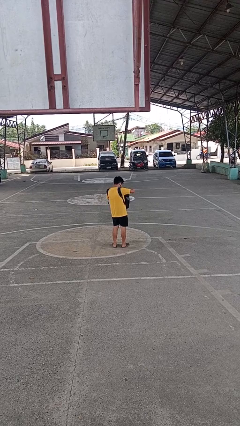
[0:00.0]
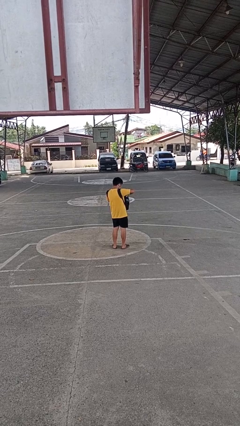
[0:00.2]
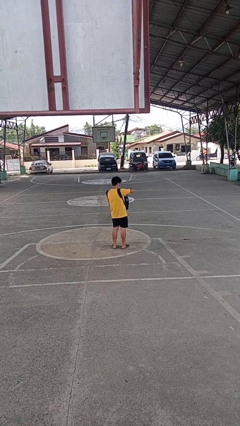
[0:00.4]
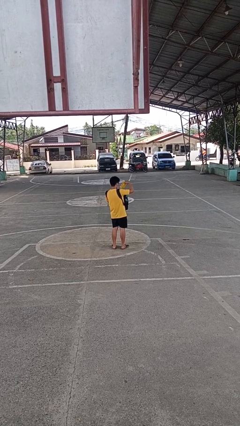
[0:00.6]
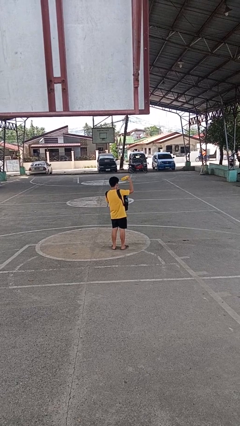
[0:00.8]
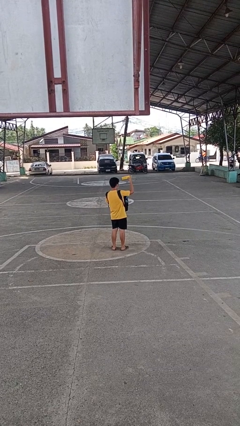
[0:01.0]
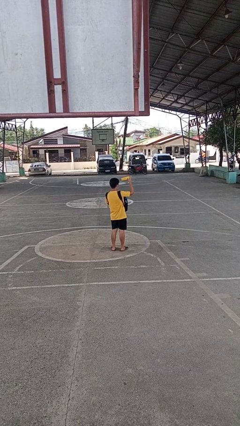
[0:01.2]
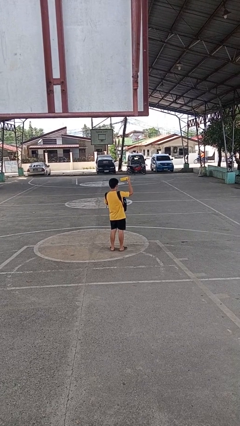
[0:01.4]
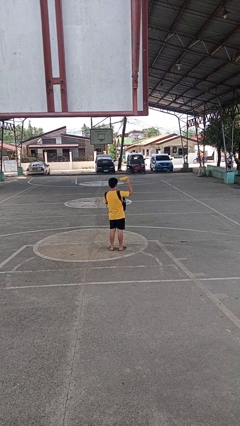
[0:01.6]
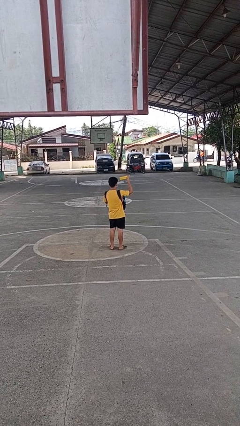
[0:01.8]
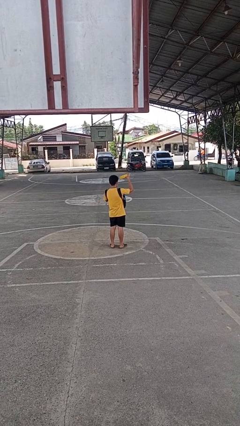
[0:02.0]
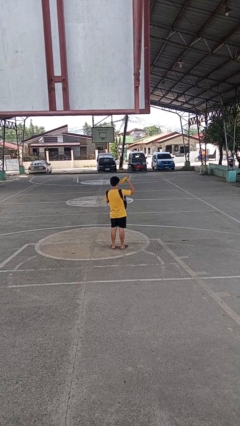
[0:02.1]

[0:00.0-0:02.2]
person takes object from backpack

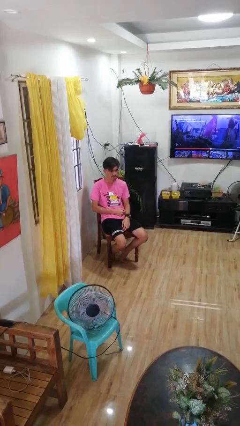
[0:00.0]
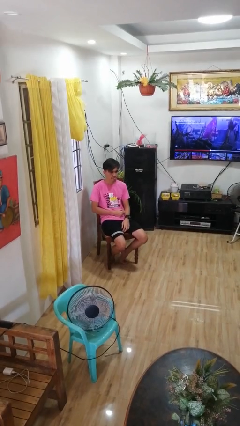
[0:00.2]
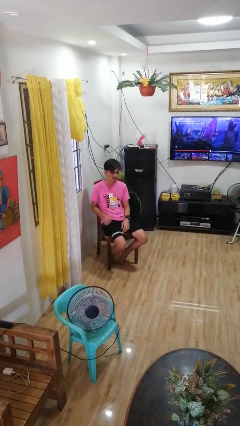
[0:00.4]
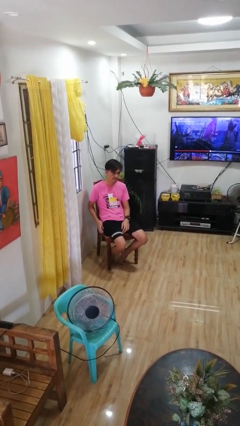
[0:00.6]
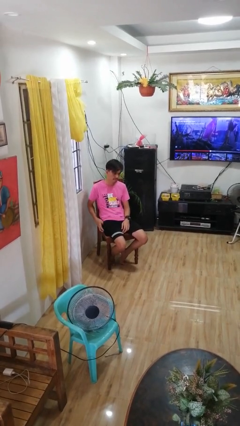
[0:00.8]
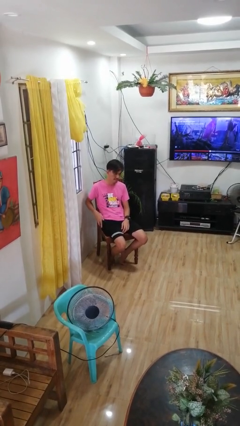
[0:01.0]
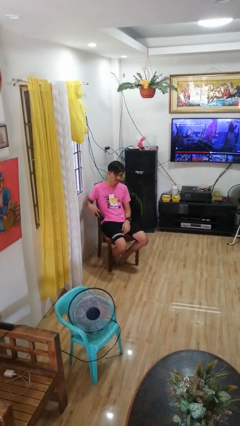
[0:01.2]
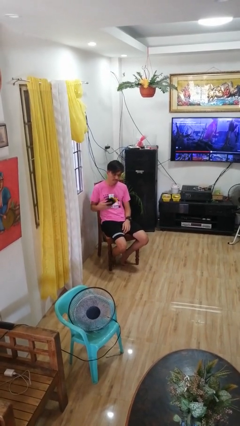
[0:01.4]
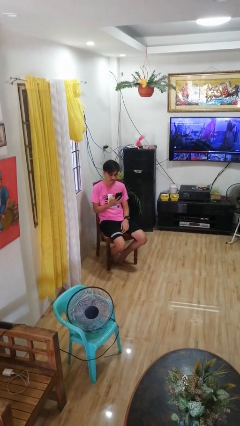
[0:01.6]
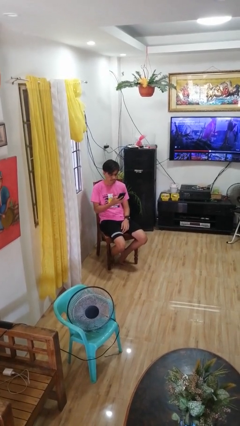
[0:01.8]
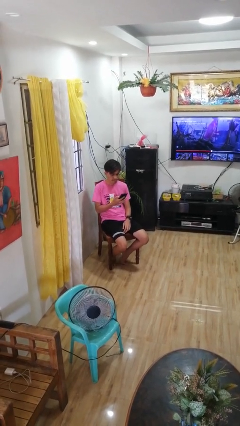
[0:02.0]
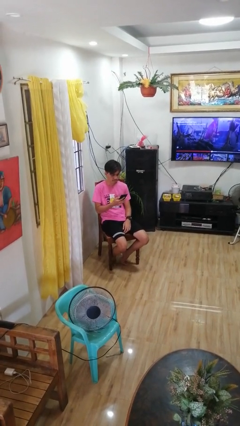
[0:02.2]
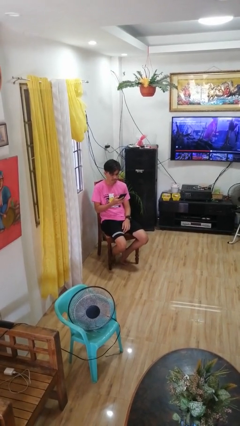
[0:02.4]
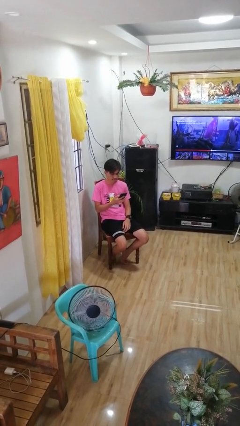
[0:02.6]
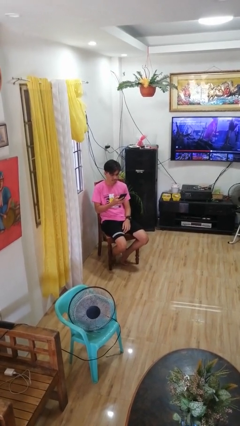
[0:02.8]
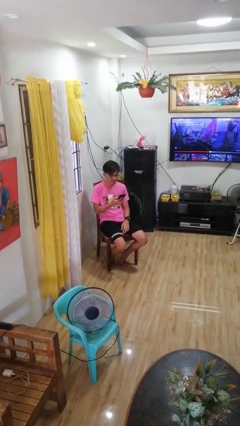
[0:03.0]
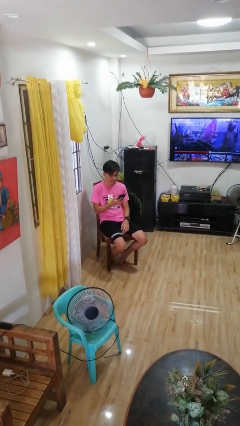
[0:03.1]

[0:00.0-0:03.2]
person takes phone from pocket

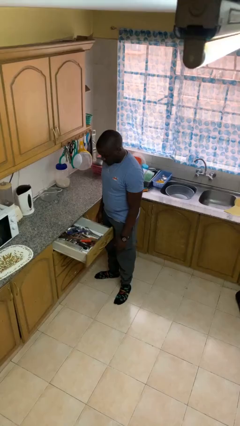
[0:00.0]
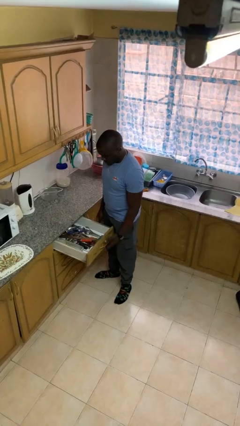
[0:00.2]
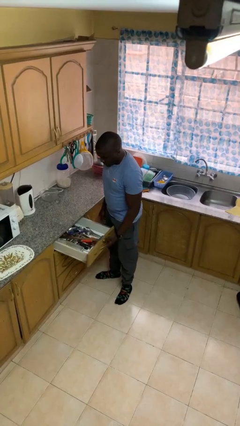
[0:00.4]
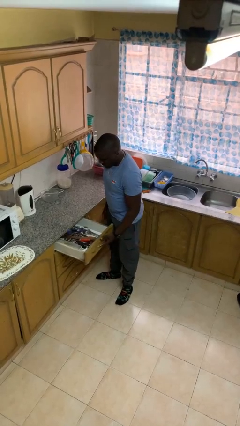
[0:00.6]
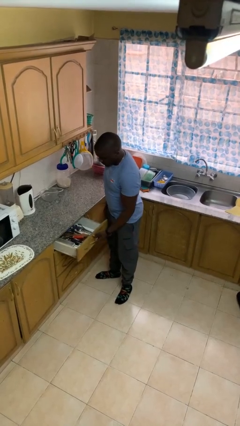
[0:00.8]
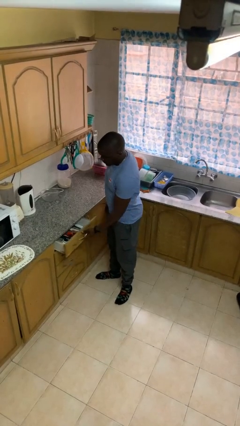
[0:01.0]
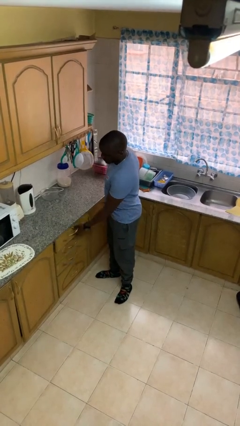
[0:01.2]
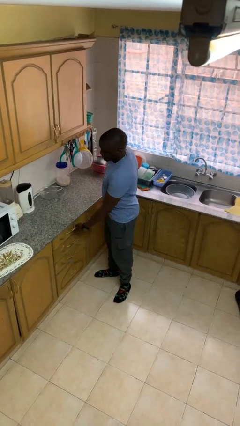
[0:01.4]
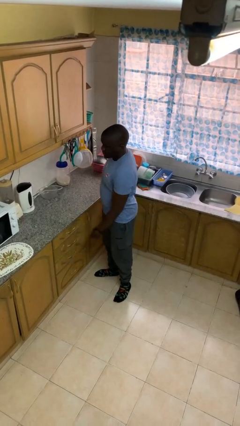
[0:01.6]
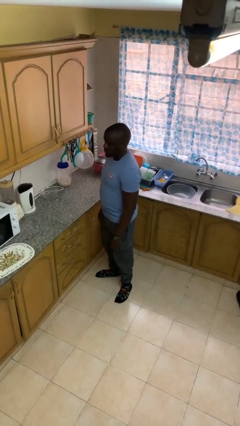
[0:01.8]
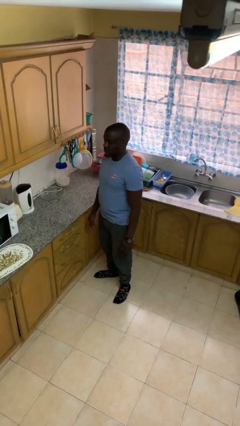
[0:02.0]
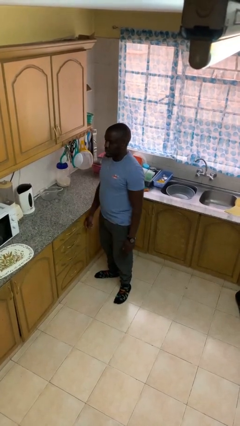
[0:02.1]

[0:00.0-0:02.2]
person closes kitchen drawer

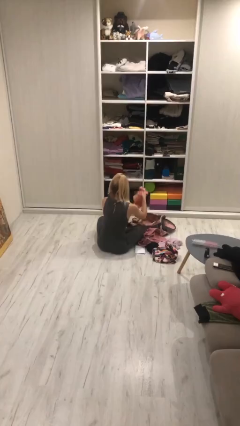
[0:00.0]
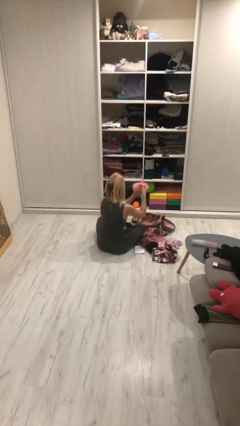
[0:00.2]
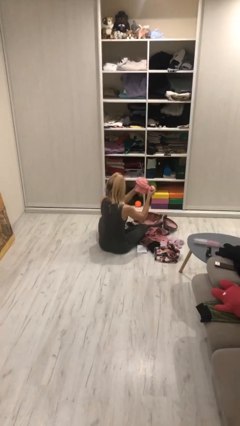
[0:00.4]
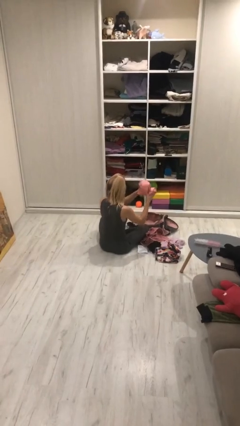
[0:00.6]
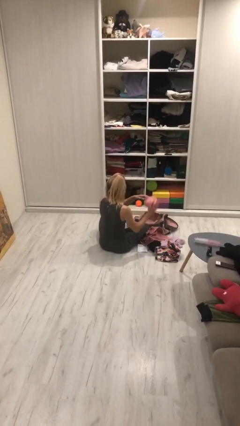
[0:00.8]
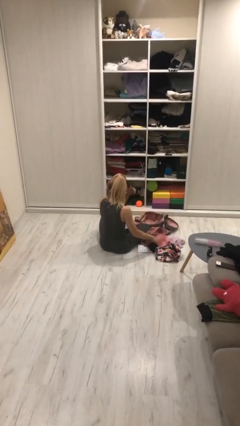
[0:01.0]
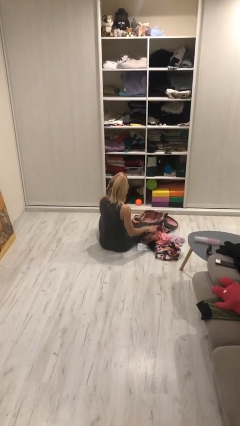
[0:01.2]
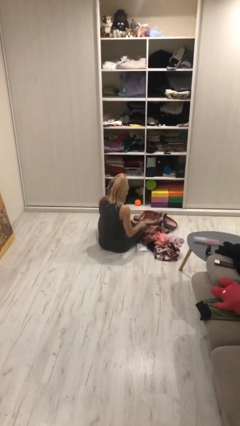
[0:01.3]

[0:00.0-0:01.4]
person unloads clothes from suitcase

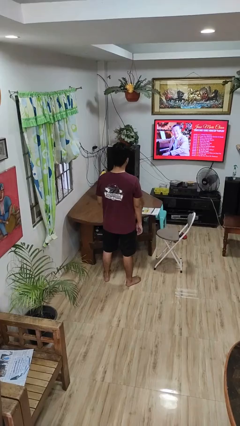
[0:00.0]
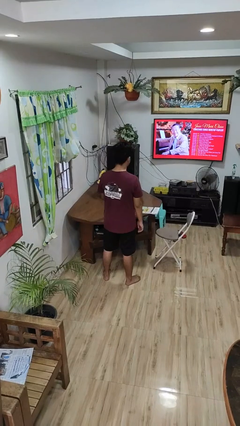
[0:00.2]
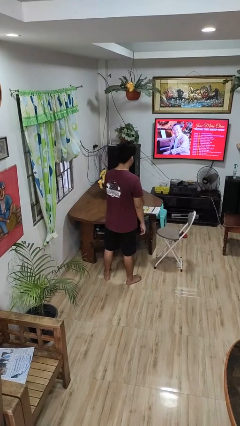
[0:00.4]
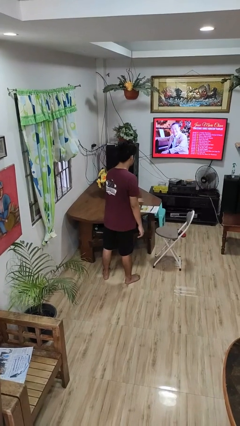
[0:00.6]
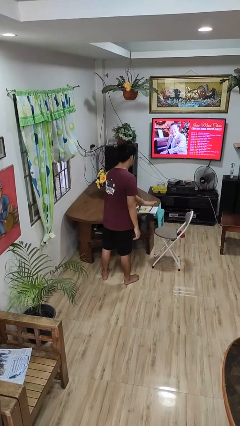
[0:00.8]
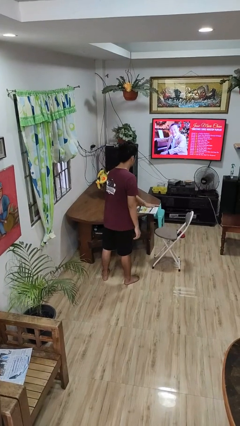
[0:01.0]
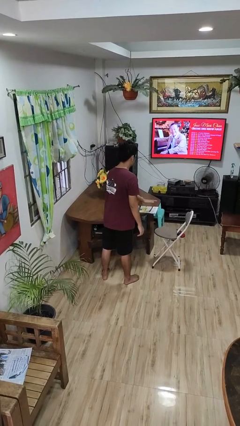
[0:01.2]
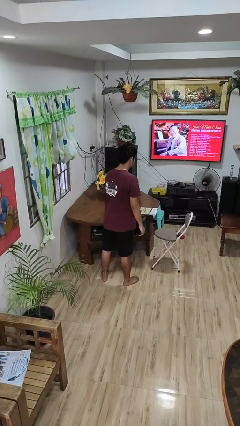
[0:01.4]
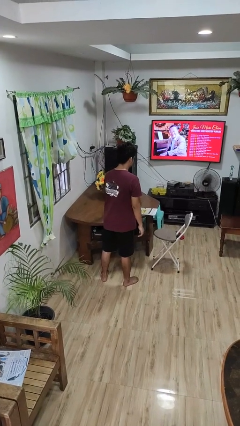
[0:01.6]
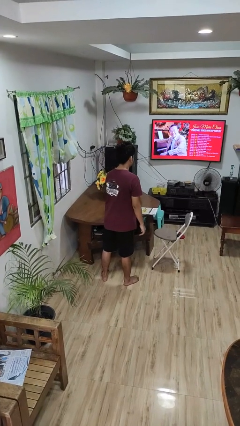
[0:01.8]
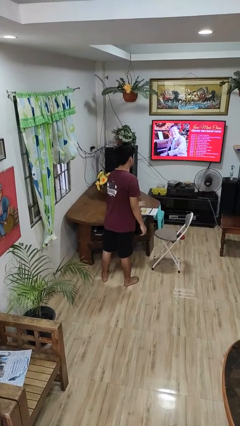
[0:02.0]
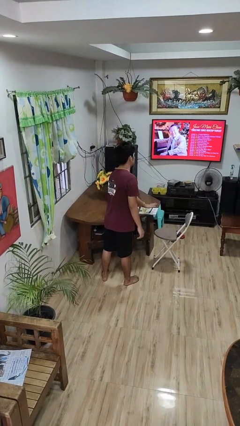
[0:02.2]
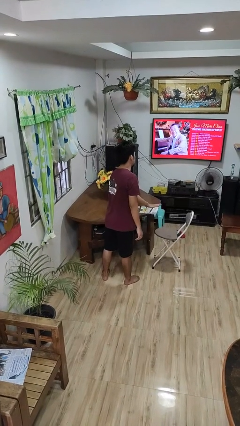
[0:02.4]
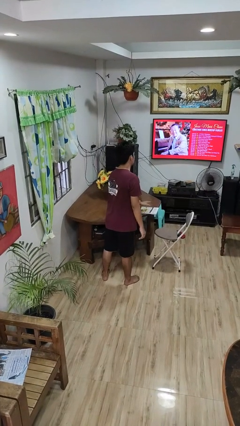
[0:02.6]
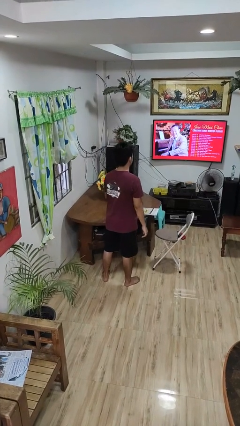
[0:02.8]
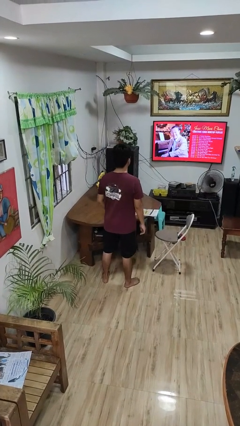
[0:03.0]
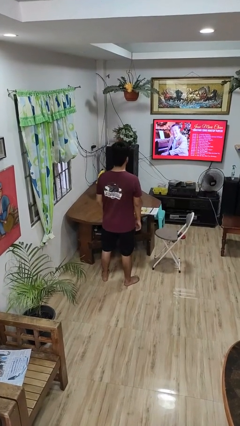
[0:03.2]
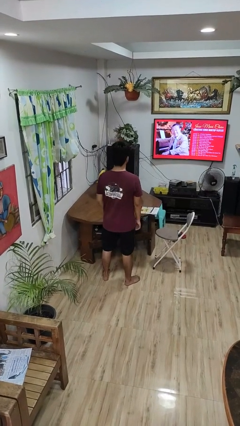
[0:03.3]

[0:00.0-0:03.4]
person waves hand over object

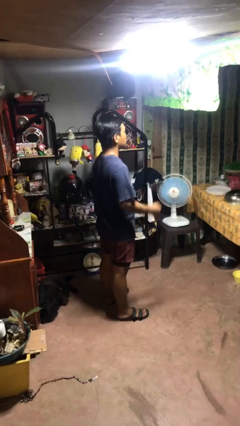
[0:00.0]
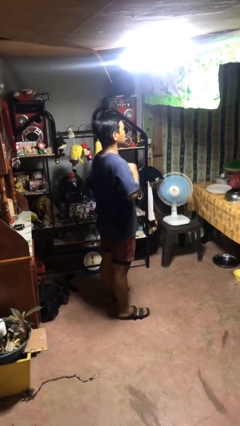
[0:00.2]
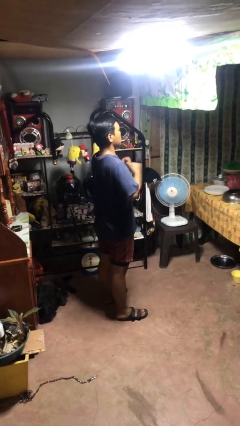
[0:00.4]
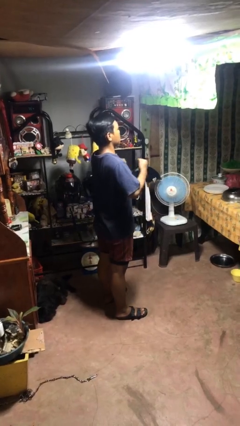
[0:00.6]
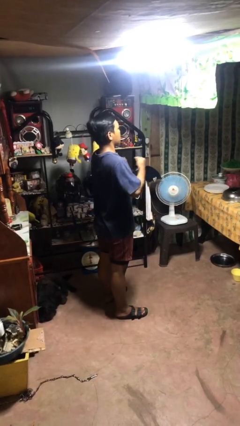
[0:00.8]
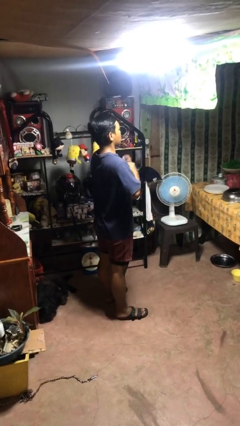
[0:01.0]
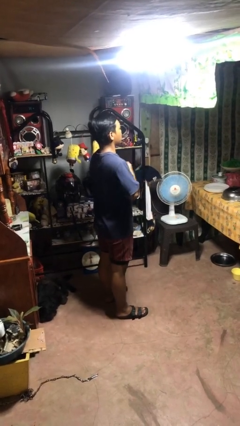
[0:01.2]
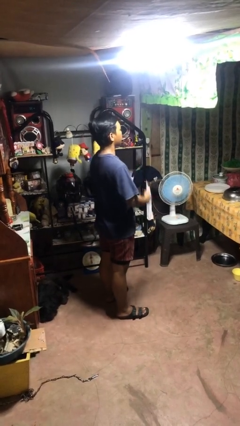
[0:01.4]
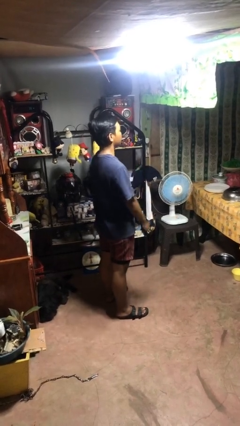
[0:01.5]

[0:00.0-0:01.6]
person drums on chest

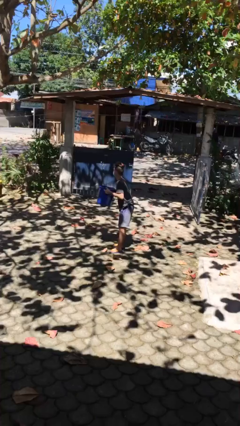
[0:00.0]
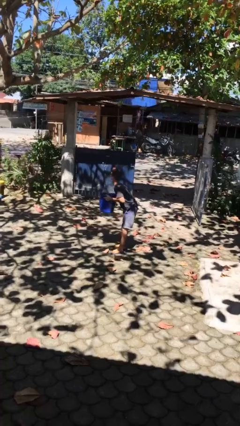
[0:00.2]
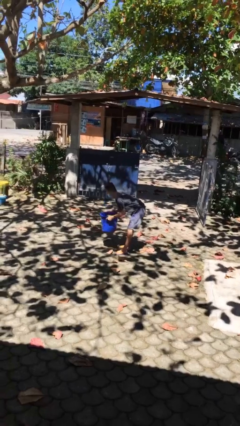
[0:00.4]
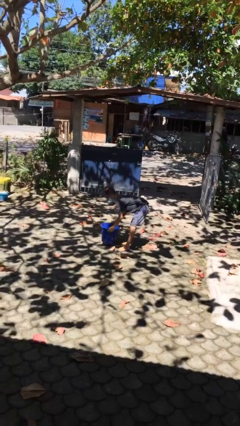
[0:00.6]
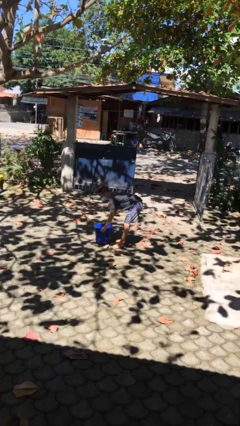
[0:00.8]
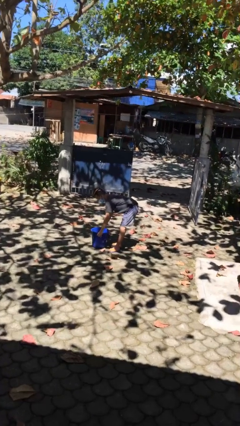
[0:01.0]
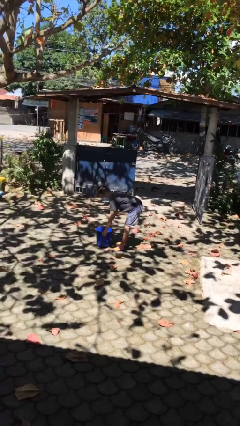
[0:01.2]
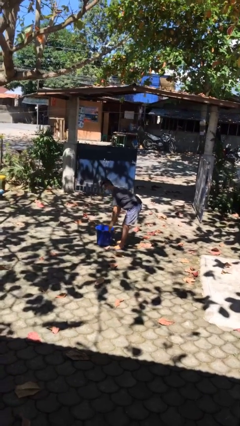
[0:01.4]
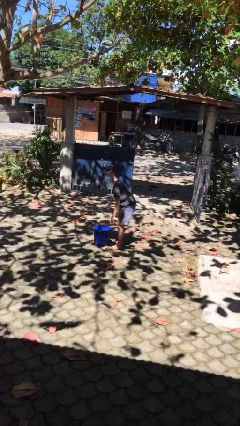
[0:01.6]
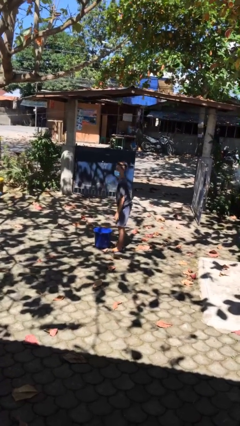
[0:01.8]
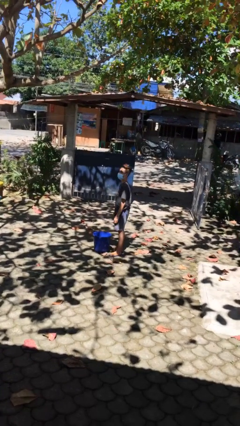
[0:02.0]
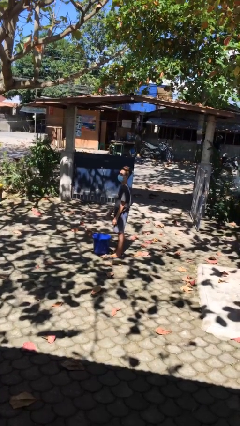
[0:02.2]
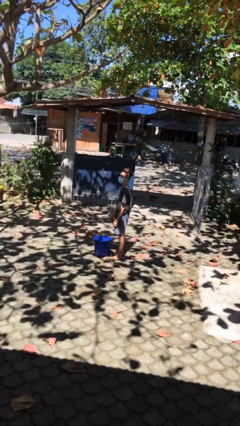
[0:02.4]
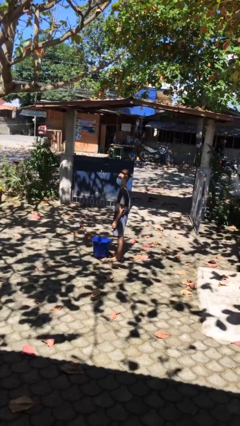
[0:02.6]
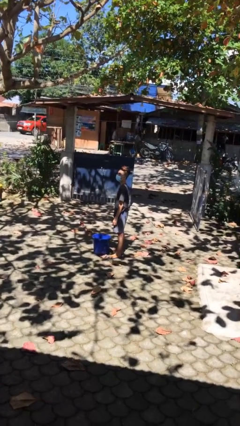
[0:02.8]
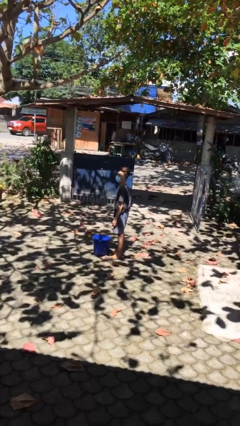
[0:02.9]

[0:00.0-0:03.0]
person puts down object on floor

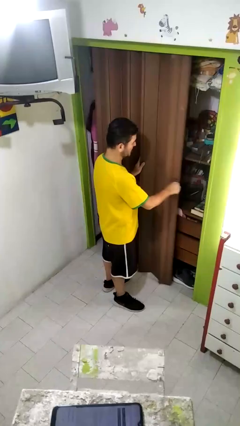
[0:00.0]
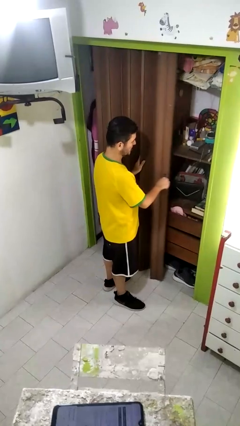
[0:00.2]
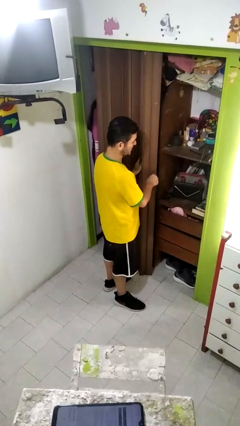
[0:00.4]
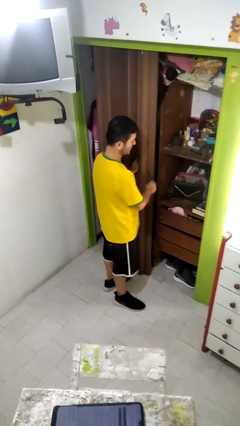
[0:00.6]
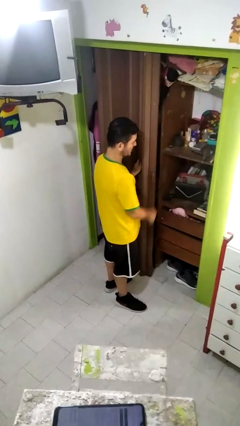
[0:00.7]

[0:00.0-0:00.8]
person opens closet door
